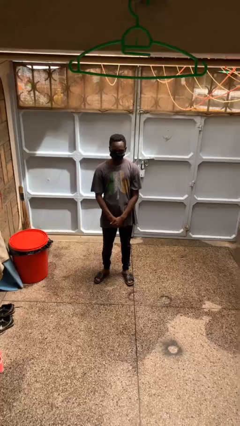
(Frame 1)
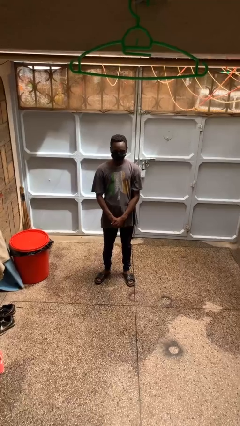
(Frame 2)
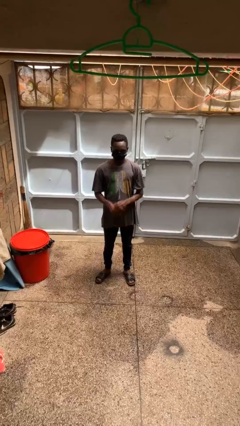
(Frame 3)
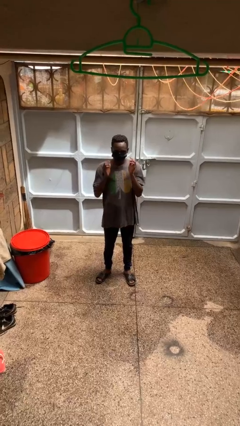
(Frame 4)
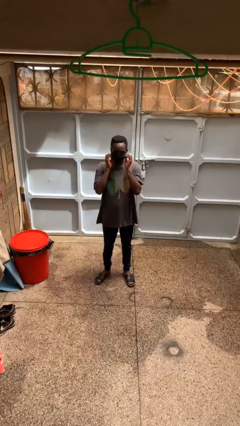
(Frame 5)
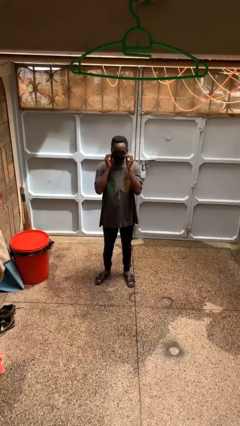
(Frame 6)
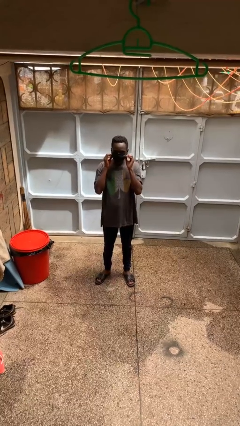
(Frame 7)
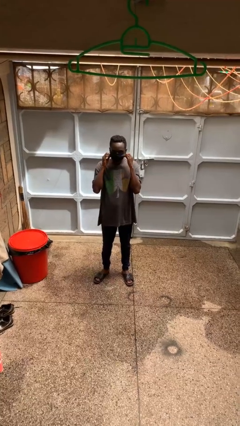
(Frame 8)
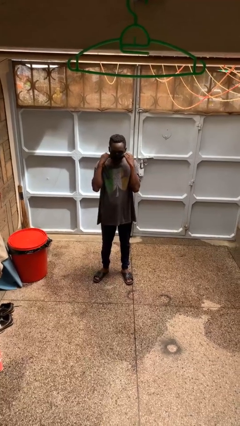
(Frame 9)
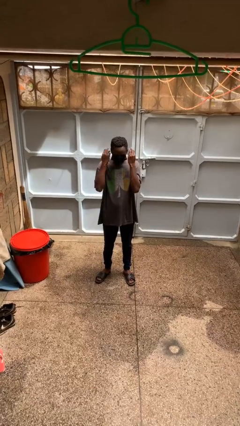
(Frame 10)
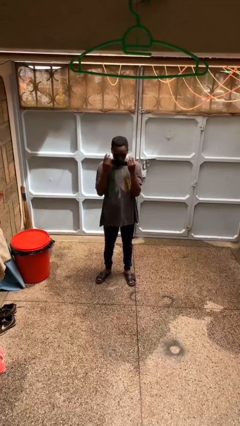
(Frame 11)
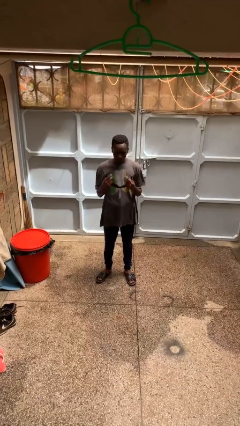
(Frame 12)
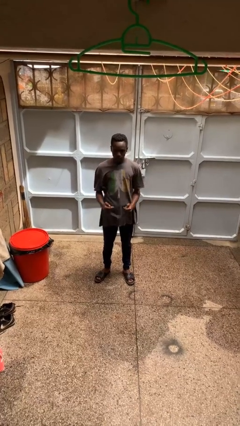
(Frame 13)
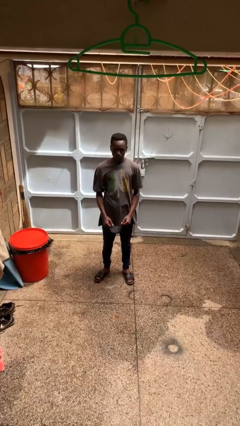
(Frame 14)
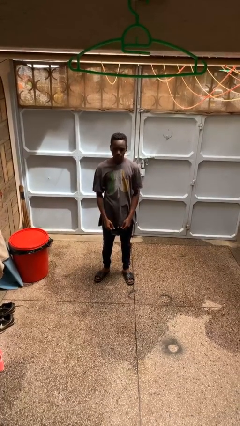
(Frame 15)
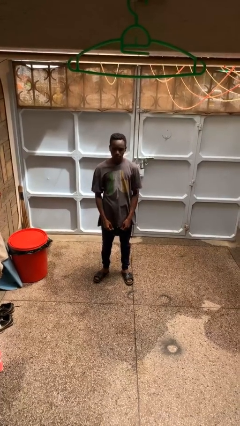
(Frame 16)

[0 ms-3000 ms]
person takes off facemask

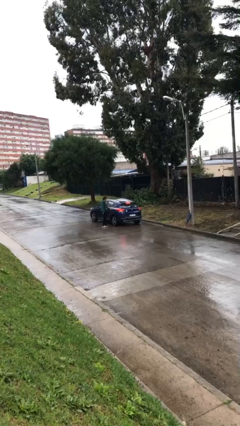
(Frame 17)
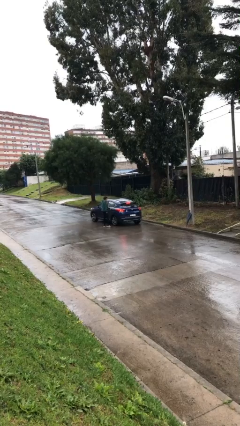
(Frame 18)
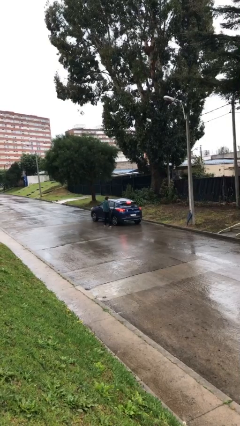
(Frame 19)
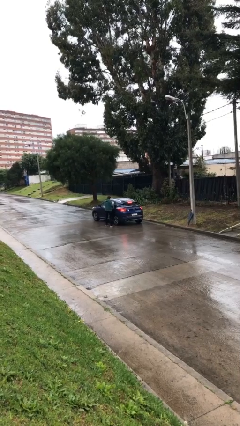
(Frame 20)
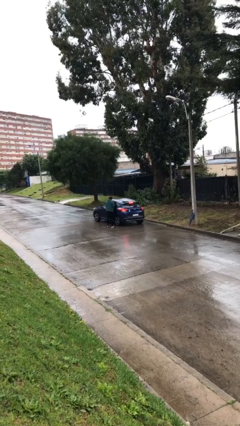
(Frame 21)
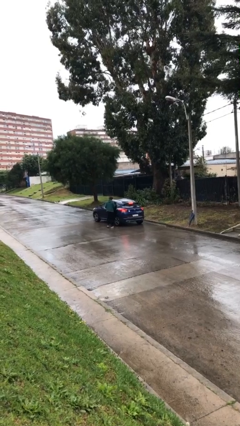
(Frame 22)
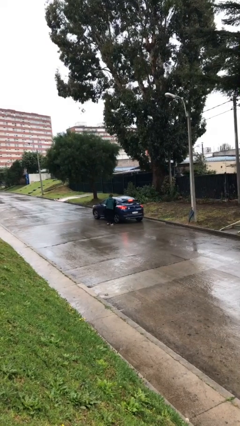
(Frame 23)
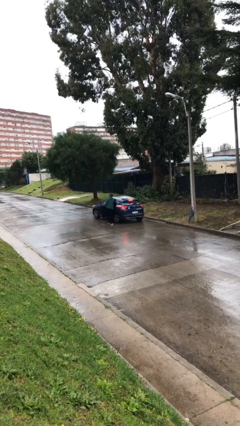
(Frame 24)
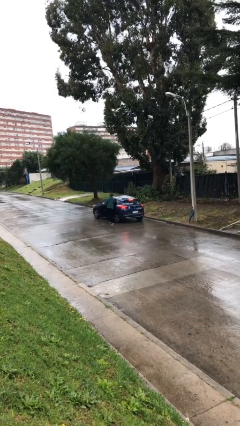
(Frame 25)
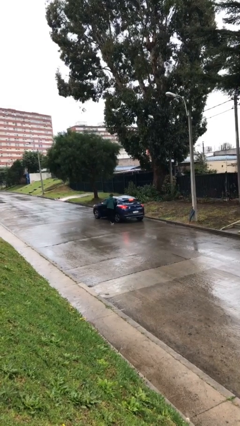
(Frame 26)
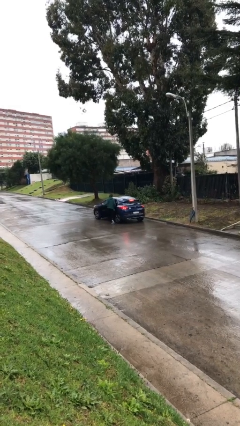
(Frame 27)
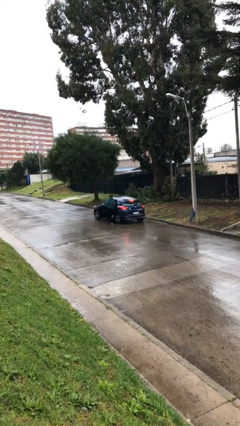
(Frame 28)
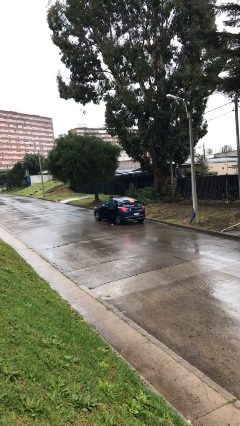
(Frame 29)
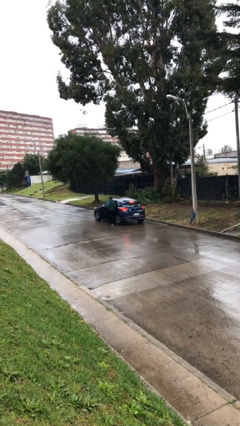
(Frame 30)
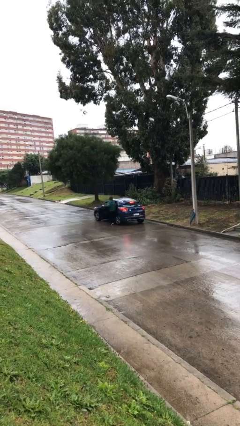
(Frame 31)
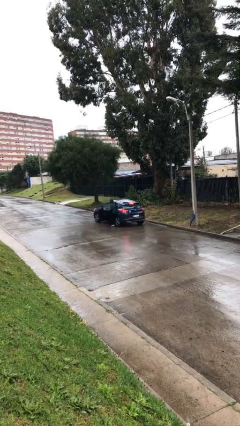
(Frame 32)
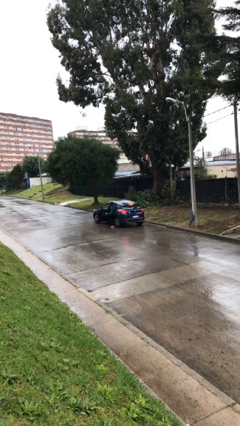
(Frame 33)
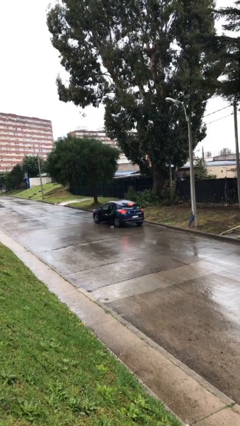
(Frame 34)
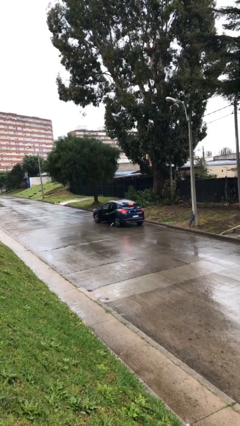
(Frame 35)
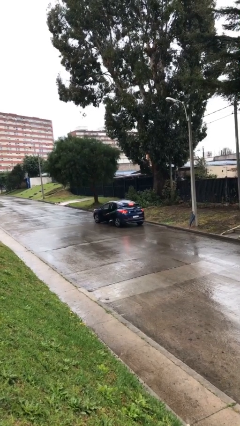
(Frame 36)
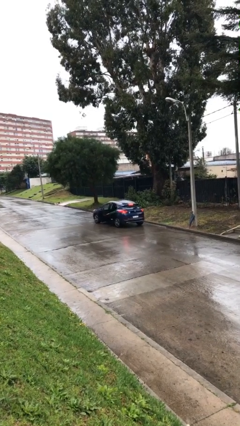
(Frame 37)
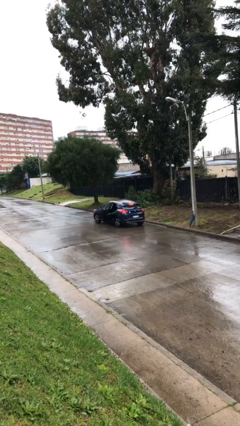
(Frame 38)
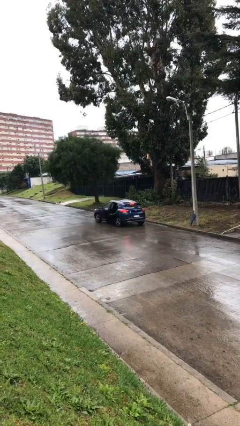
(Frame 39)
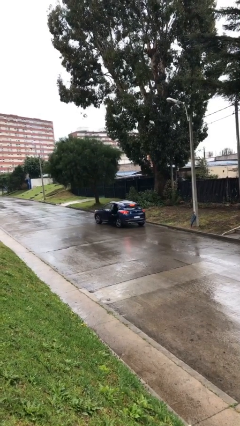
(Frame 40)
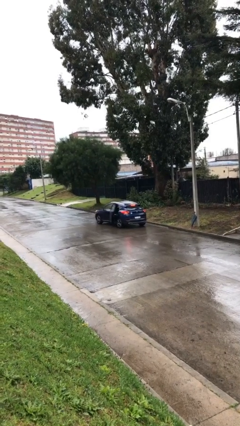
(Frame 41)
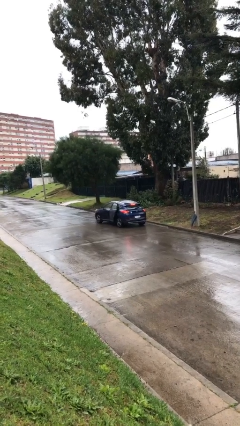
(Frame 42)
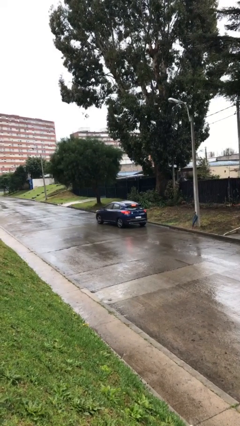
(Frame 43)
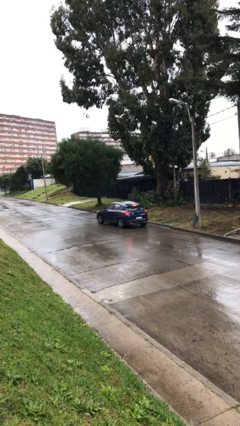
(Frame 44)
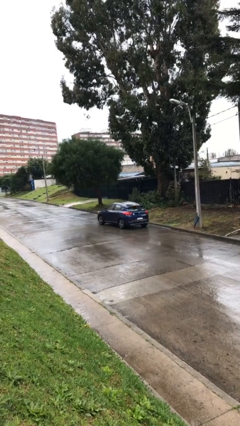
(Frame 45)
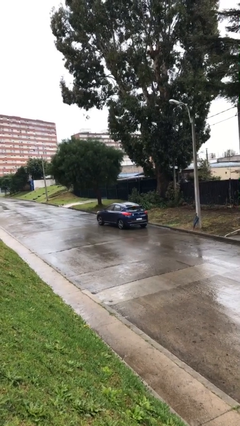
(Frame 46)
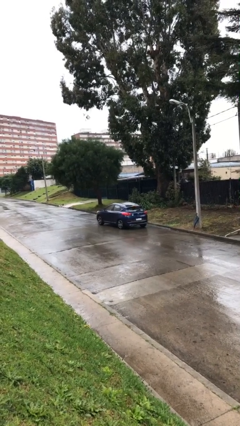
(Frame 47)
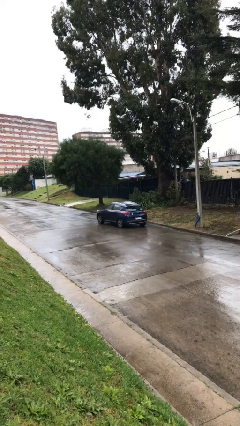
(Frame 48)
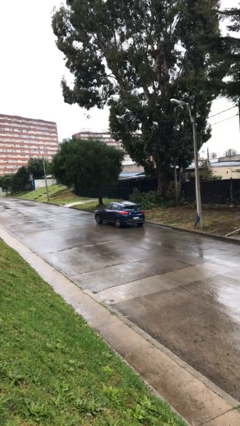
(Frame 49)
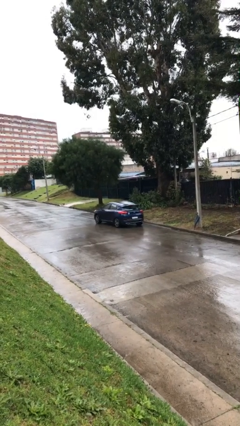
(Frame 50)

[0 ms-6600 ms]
car picks up person

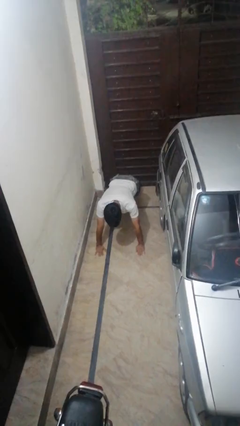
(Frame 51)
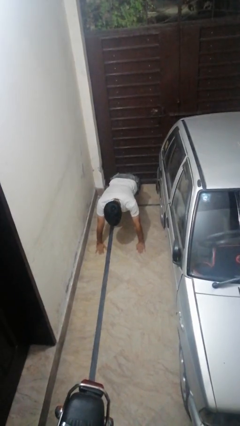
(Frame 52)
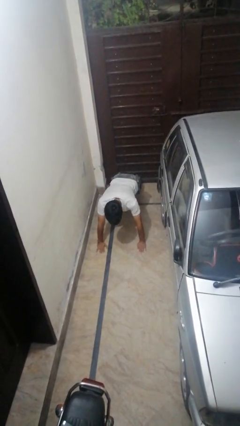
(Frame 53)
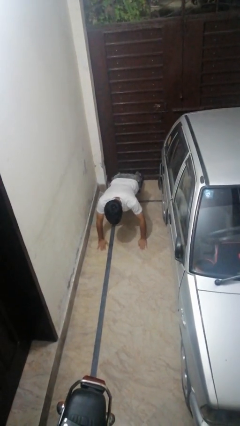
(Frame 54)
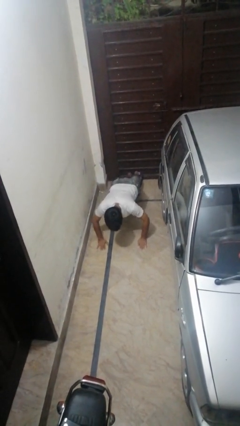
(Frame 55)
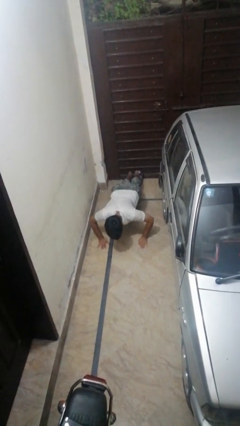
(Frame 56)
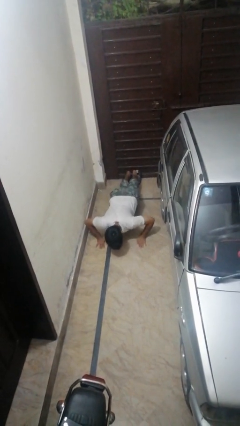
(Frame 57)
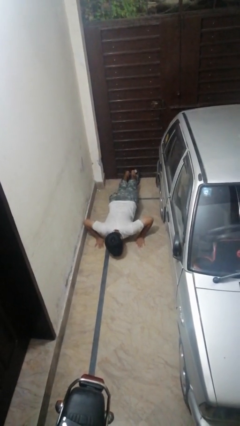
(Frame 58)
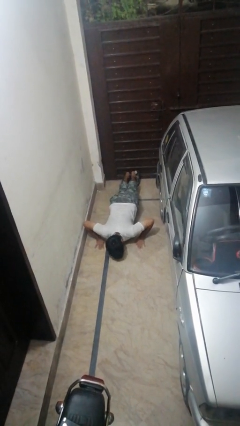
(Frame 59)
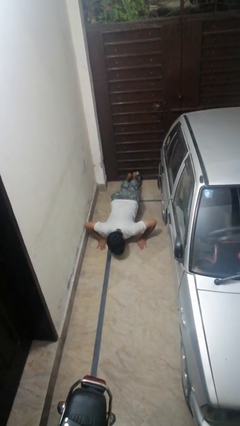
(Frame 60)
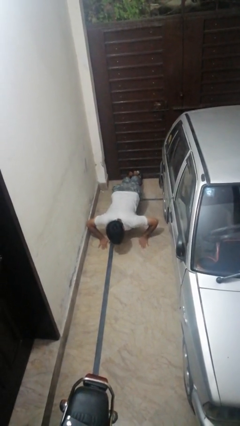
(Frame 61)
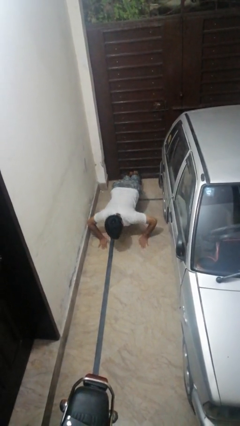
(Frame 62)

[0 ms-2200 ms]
person exercises with pushup

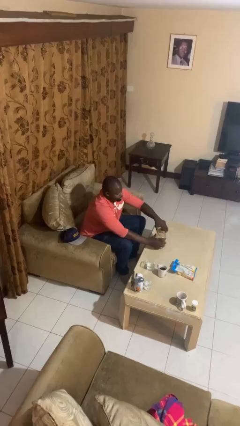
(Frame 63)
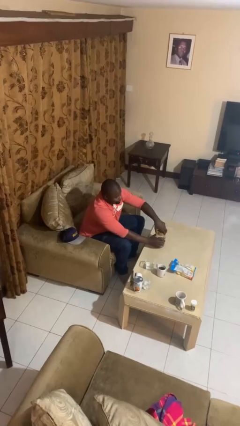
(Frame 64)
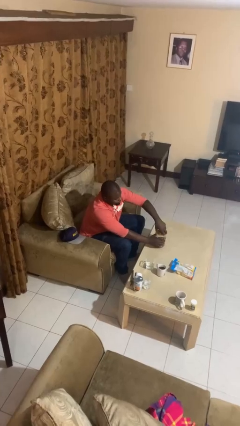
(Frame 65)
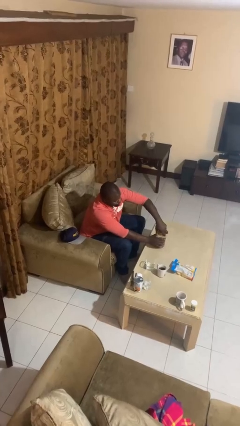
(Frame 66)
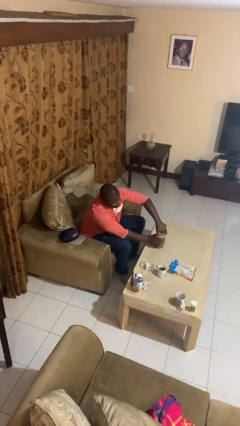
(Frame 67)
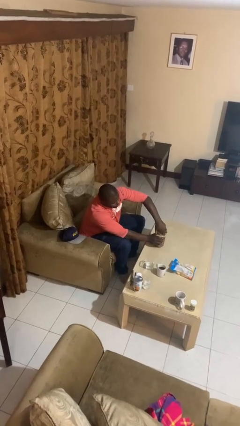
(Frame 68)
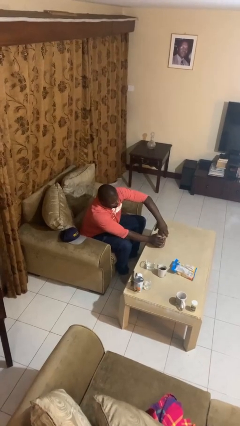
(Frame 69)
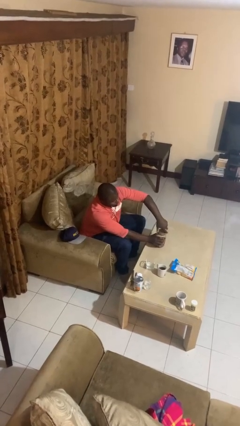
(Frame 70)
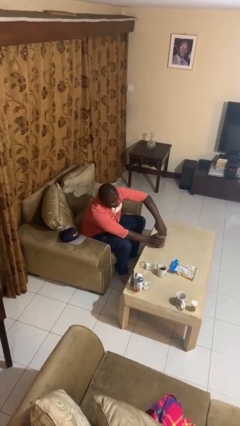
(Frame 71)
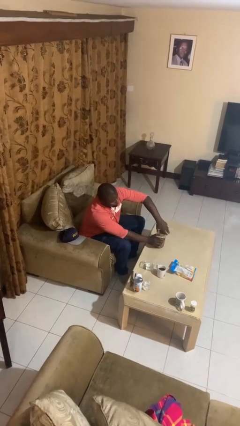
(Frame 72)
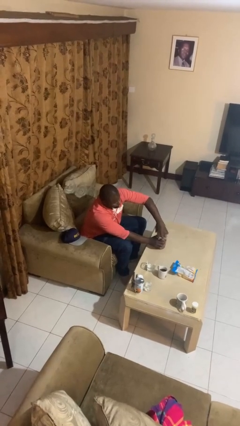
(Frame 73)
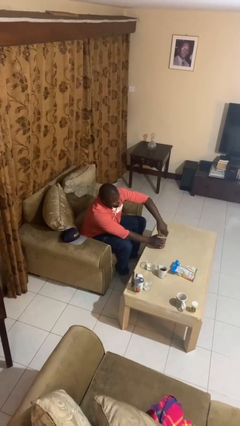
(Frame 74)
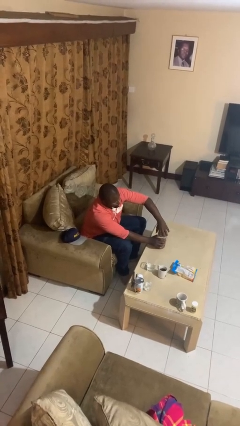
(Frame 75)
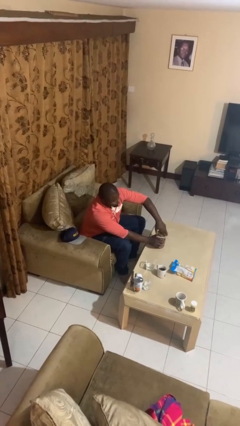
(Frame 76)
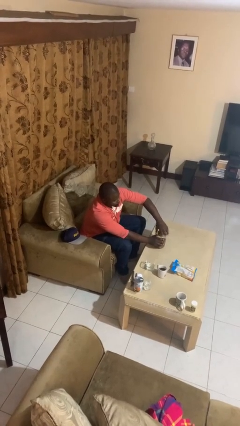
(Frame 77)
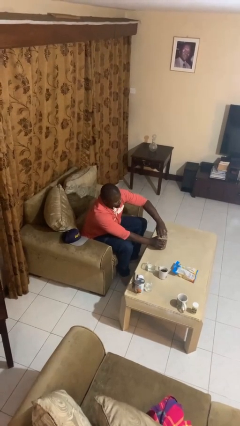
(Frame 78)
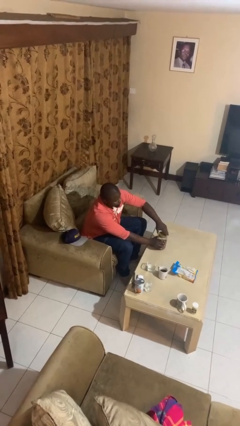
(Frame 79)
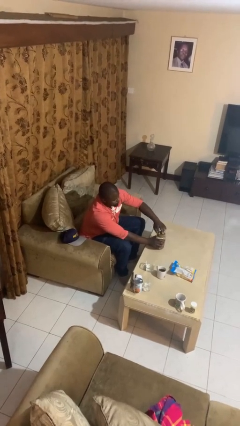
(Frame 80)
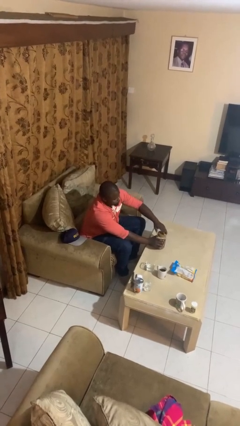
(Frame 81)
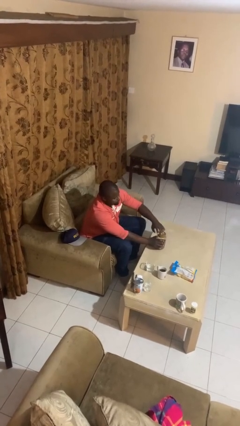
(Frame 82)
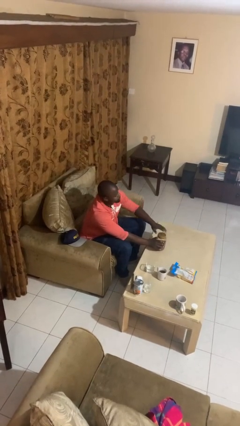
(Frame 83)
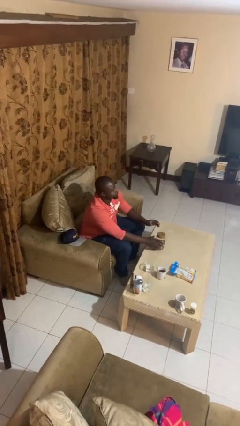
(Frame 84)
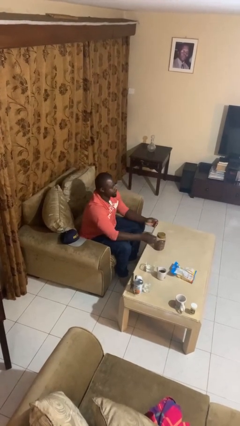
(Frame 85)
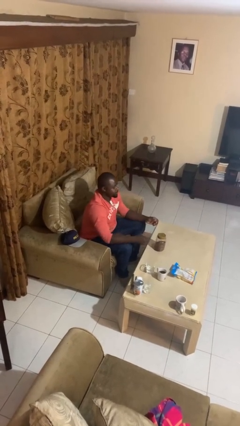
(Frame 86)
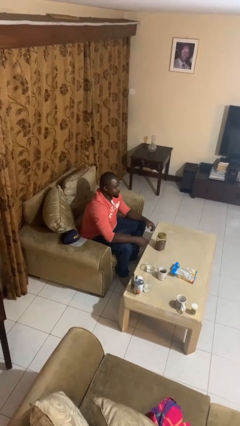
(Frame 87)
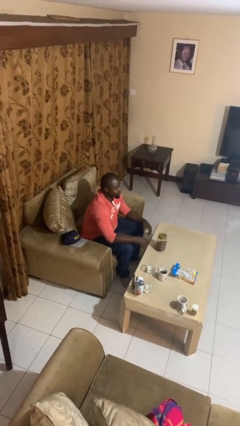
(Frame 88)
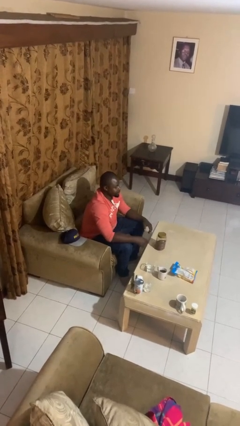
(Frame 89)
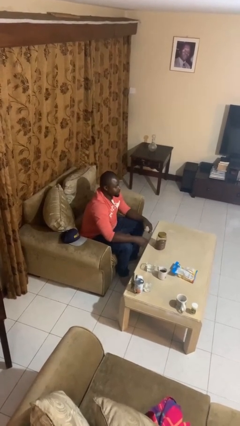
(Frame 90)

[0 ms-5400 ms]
person closes jar
